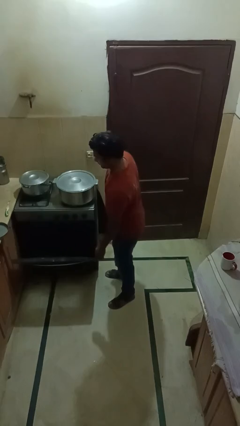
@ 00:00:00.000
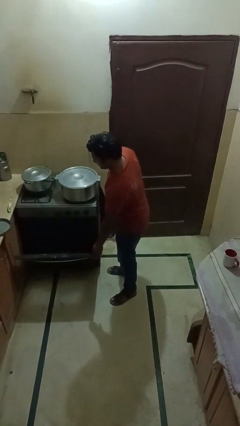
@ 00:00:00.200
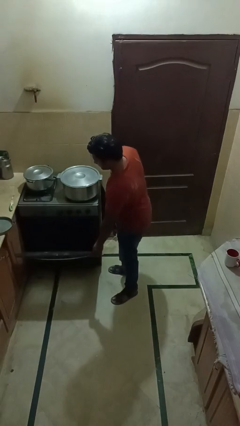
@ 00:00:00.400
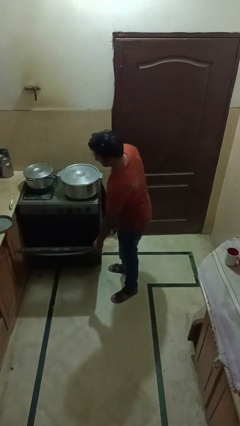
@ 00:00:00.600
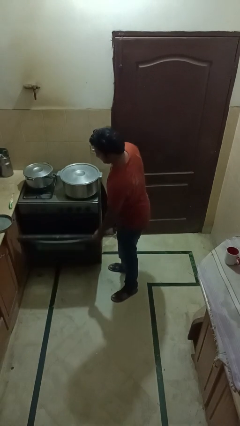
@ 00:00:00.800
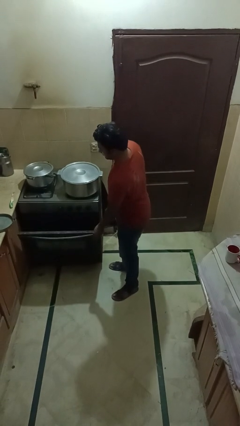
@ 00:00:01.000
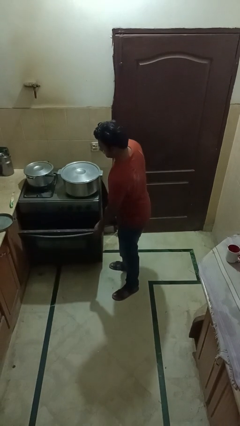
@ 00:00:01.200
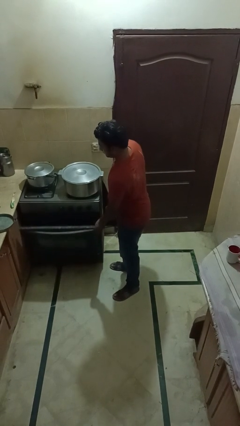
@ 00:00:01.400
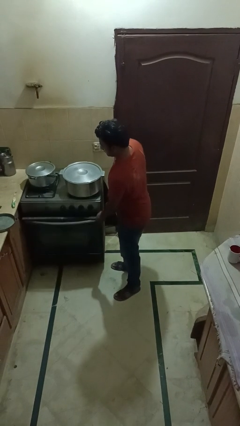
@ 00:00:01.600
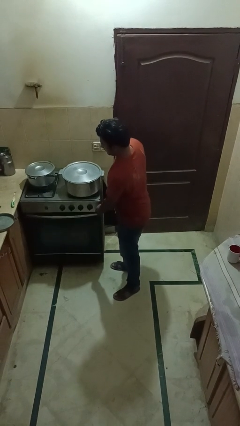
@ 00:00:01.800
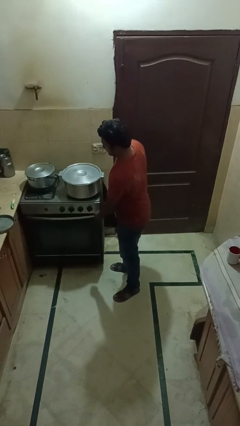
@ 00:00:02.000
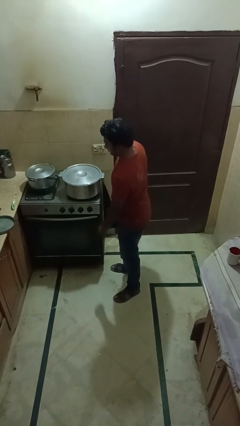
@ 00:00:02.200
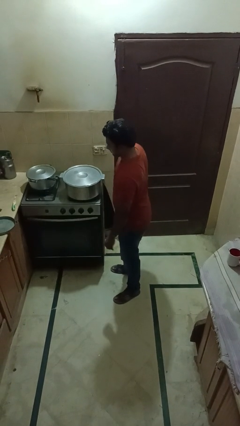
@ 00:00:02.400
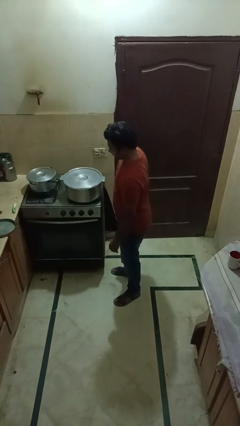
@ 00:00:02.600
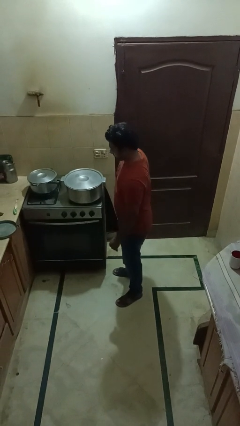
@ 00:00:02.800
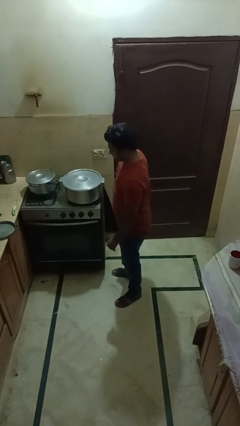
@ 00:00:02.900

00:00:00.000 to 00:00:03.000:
person closes oven door

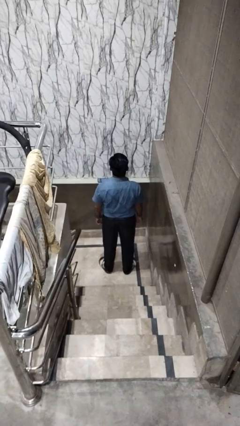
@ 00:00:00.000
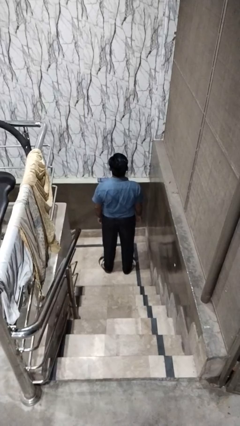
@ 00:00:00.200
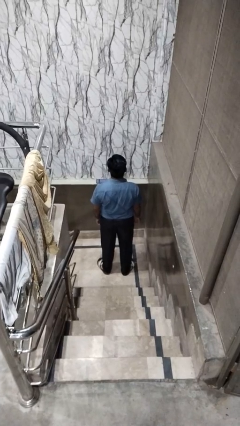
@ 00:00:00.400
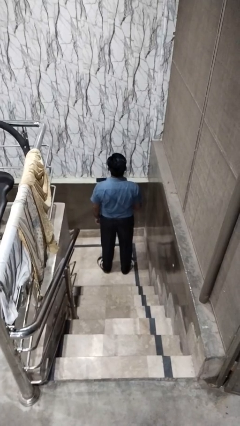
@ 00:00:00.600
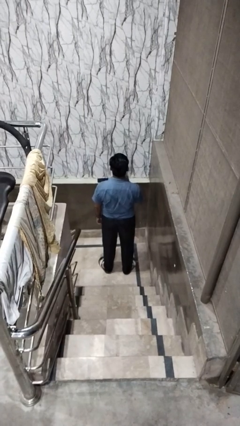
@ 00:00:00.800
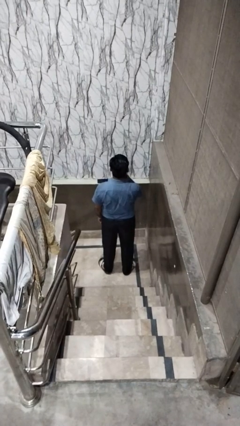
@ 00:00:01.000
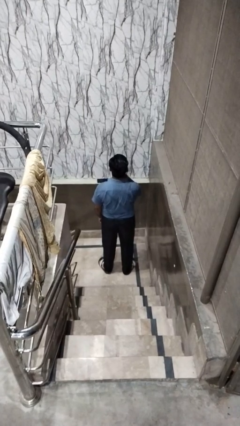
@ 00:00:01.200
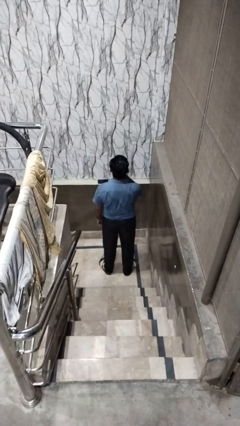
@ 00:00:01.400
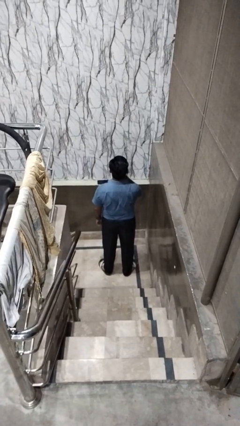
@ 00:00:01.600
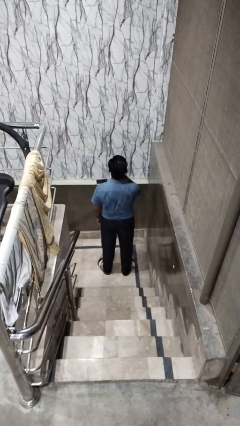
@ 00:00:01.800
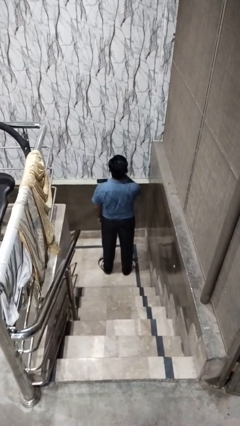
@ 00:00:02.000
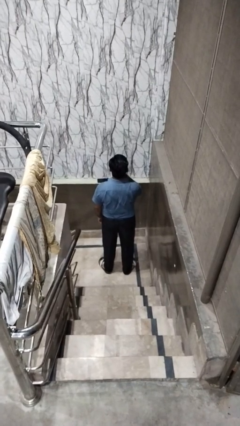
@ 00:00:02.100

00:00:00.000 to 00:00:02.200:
person gestures be quiet

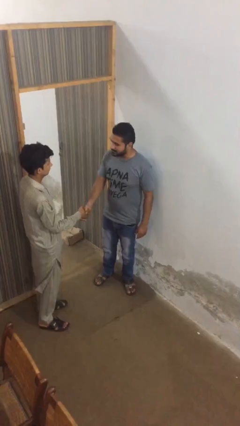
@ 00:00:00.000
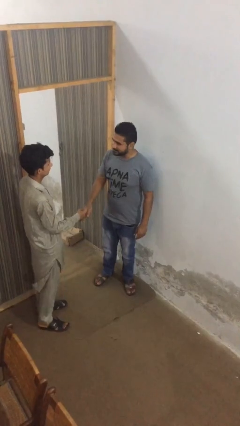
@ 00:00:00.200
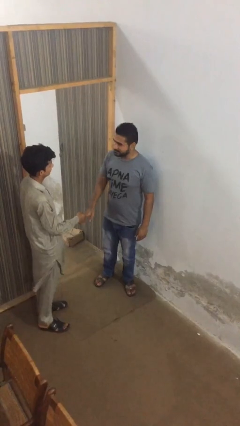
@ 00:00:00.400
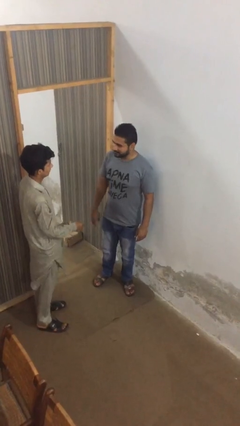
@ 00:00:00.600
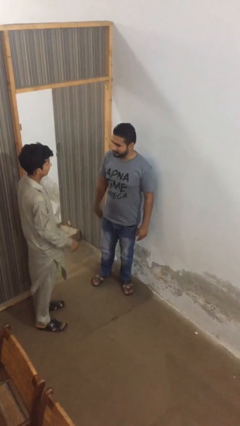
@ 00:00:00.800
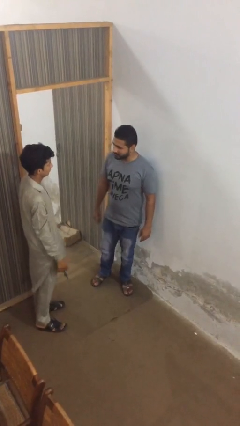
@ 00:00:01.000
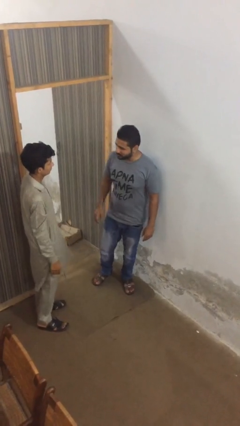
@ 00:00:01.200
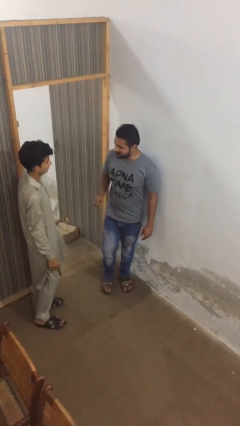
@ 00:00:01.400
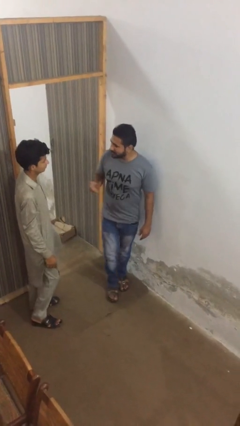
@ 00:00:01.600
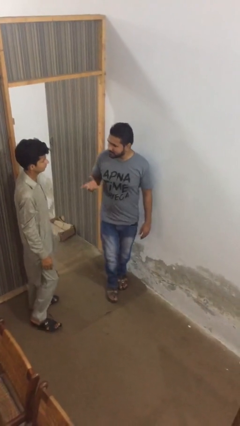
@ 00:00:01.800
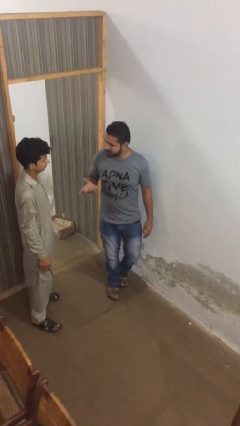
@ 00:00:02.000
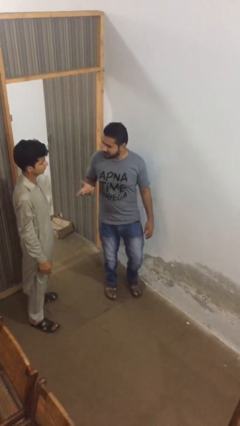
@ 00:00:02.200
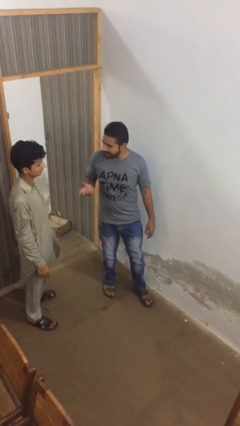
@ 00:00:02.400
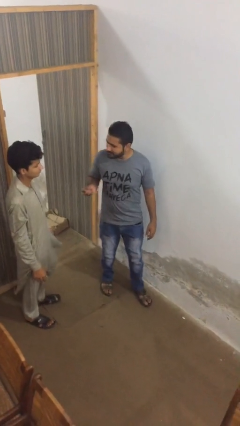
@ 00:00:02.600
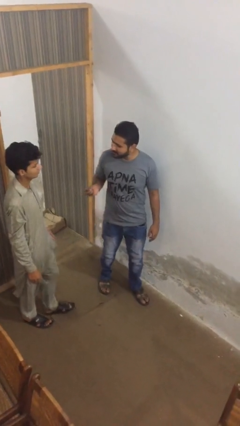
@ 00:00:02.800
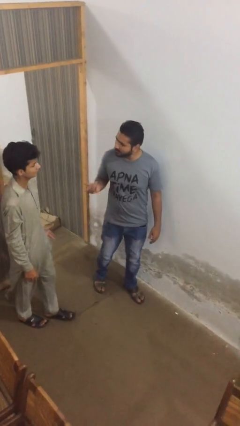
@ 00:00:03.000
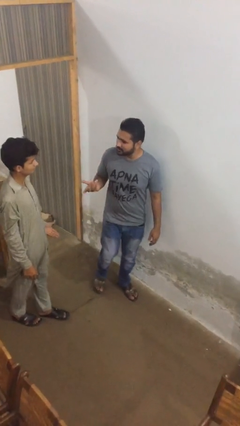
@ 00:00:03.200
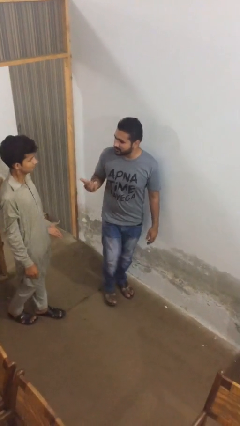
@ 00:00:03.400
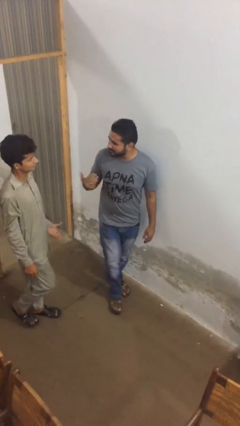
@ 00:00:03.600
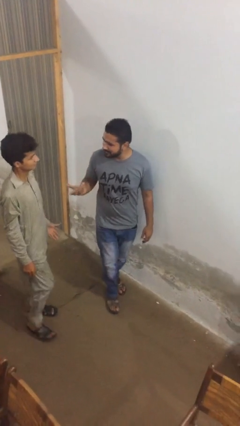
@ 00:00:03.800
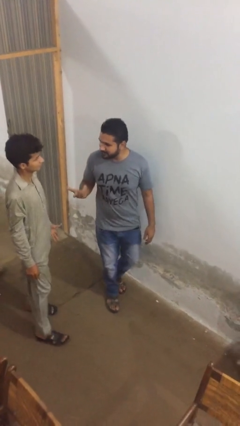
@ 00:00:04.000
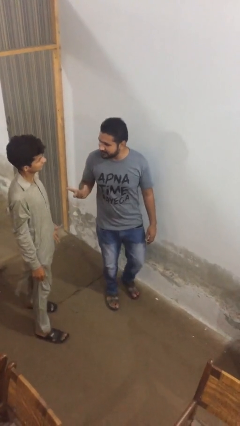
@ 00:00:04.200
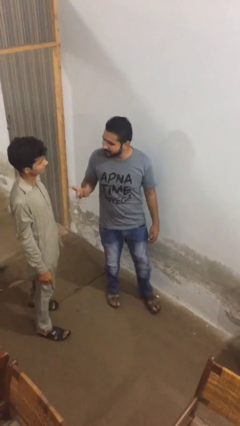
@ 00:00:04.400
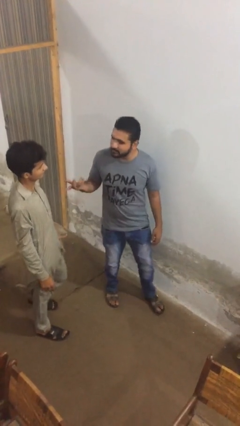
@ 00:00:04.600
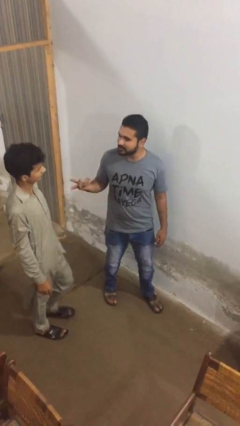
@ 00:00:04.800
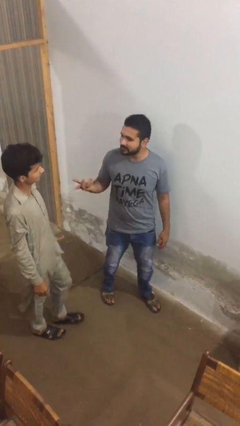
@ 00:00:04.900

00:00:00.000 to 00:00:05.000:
person talks to person

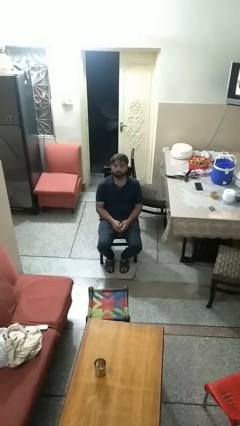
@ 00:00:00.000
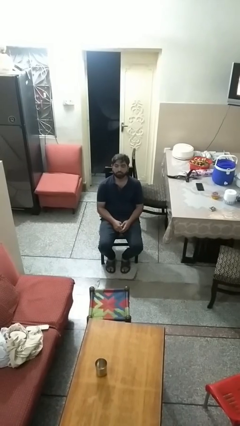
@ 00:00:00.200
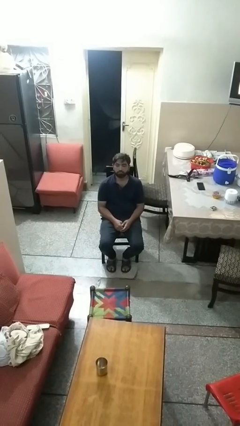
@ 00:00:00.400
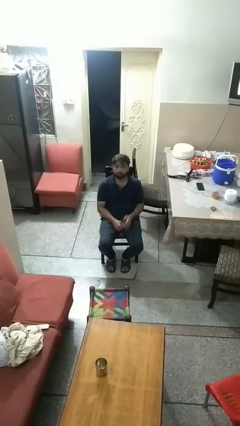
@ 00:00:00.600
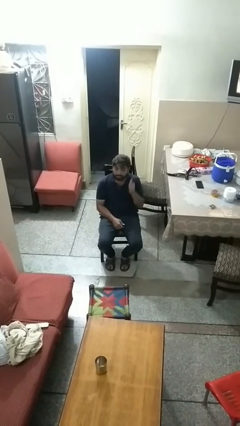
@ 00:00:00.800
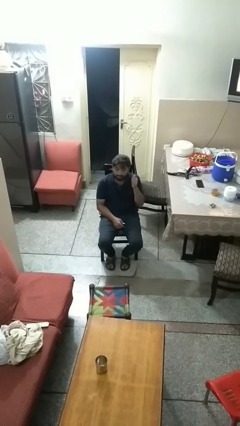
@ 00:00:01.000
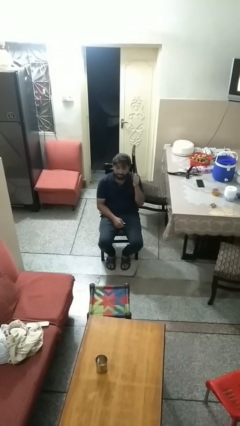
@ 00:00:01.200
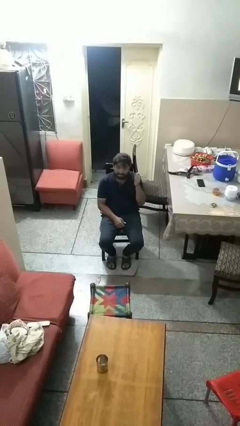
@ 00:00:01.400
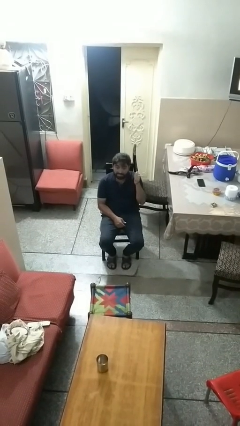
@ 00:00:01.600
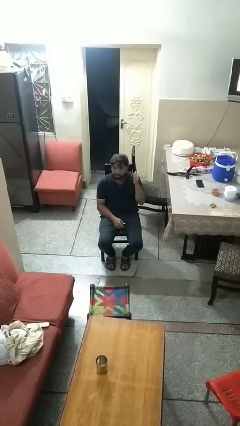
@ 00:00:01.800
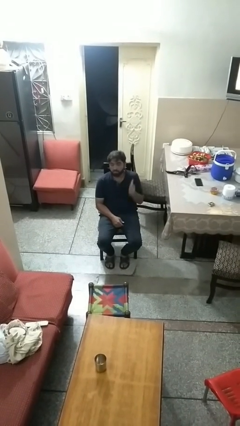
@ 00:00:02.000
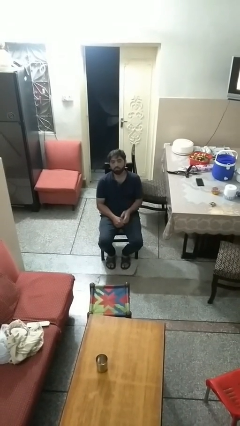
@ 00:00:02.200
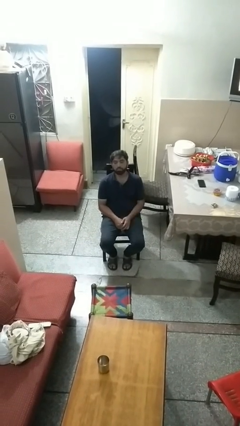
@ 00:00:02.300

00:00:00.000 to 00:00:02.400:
person gestures behind me

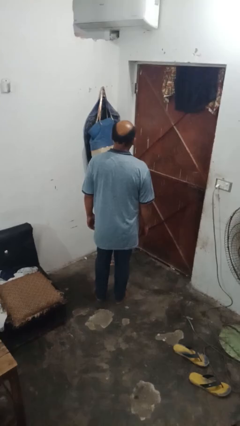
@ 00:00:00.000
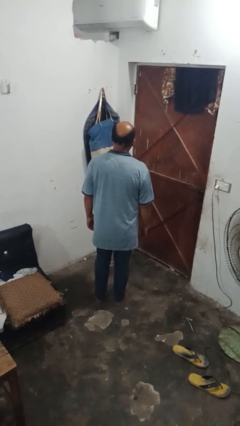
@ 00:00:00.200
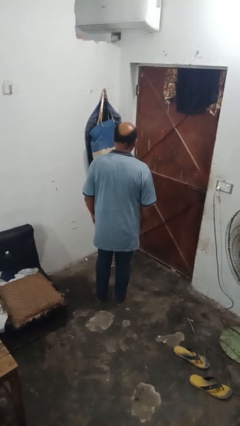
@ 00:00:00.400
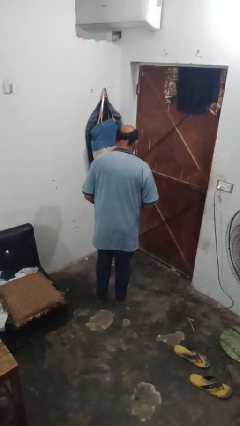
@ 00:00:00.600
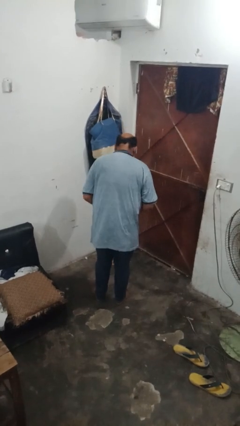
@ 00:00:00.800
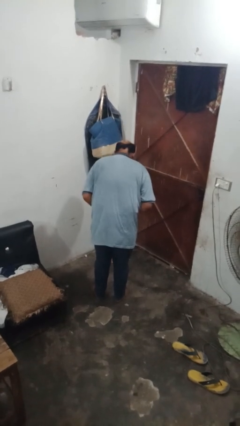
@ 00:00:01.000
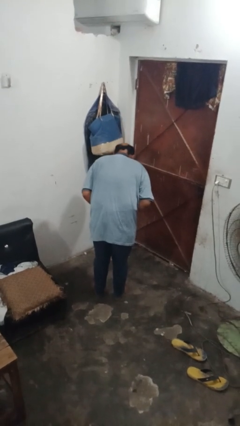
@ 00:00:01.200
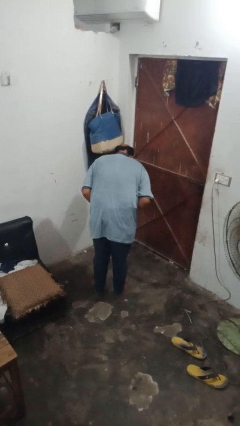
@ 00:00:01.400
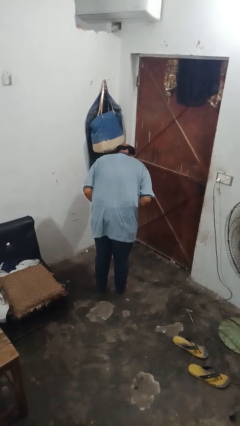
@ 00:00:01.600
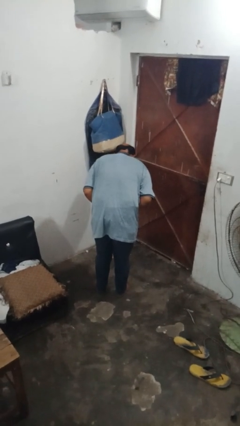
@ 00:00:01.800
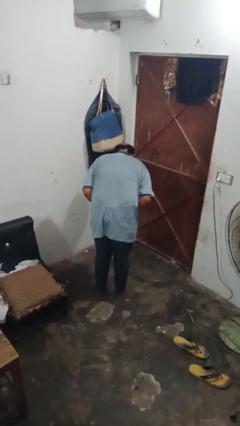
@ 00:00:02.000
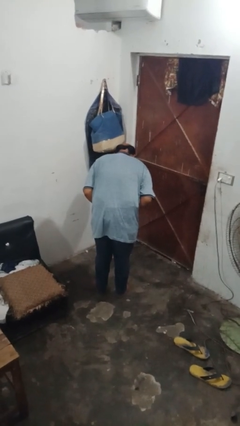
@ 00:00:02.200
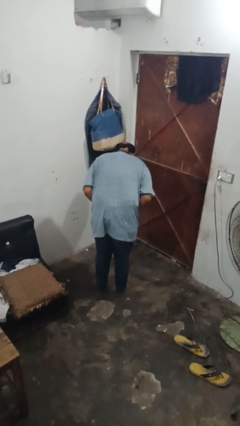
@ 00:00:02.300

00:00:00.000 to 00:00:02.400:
person bows

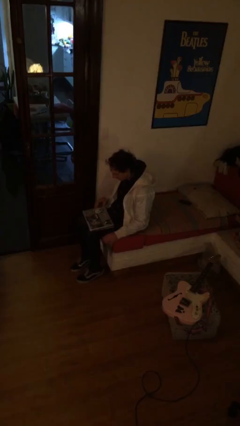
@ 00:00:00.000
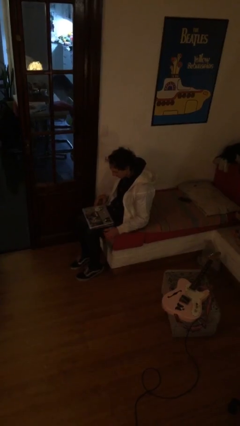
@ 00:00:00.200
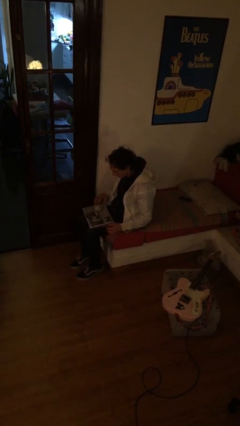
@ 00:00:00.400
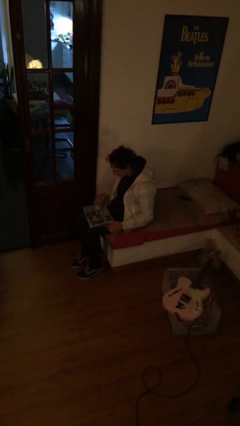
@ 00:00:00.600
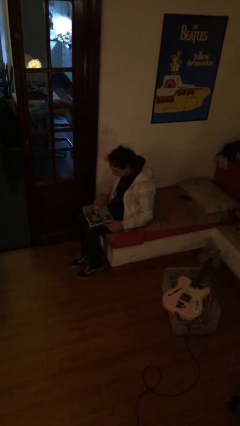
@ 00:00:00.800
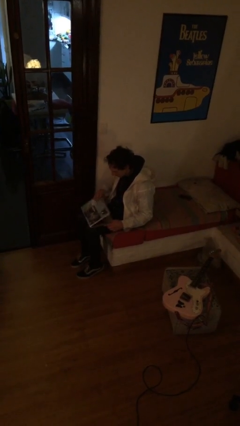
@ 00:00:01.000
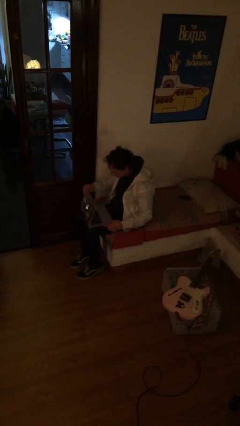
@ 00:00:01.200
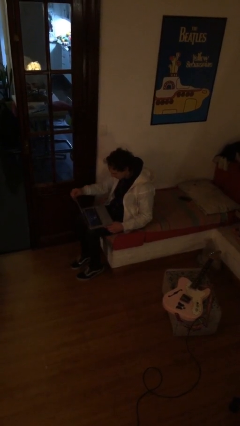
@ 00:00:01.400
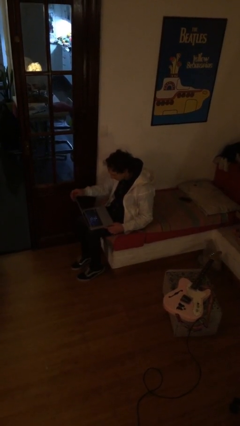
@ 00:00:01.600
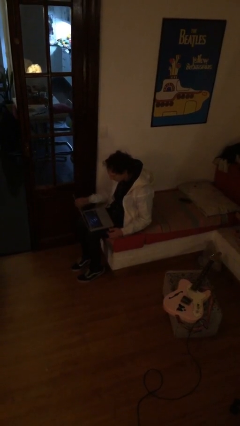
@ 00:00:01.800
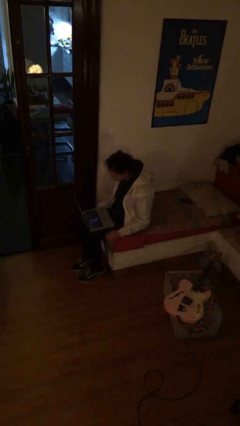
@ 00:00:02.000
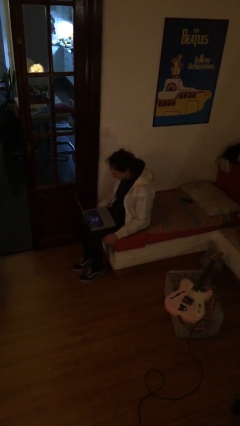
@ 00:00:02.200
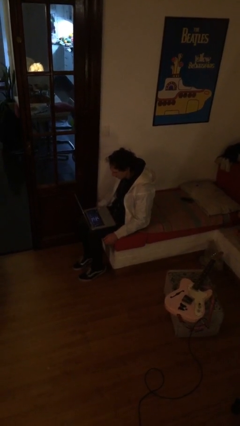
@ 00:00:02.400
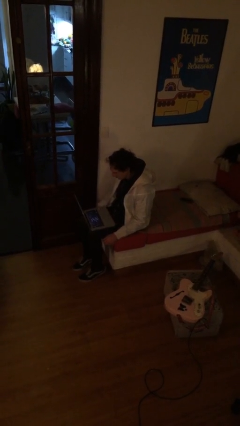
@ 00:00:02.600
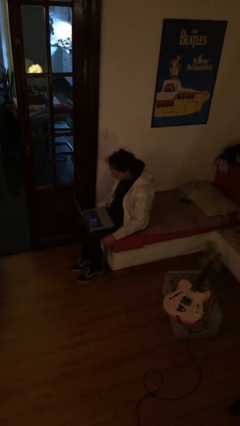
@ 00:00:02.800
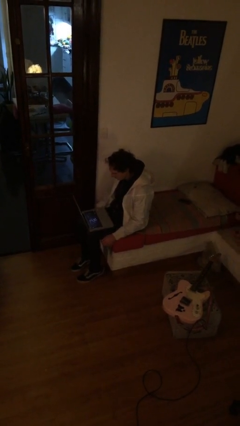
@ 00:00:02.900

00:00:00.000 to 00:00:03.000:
person opens laptop
